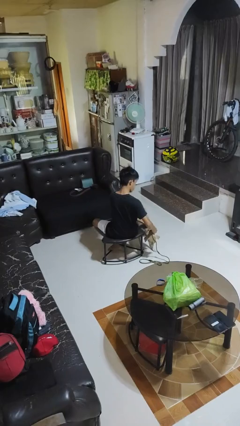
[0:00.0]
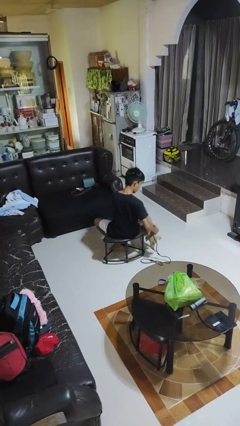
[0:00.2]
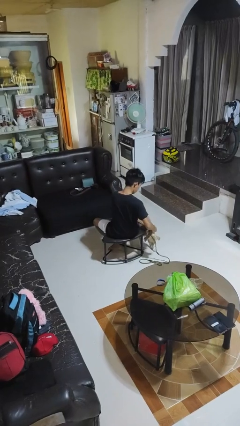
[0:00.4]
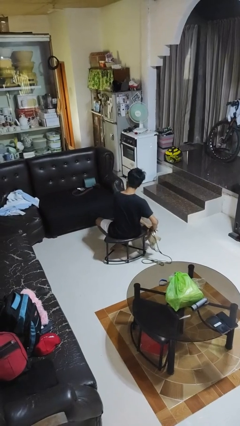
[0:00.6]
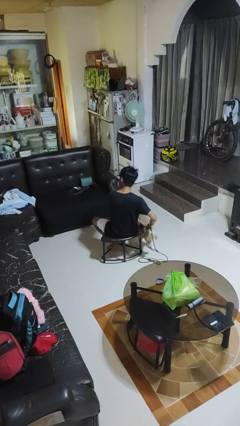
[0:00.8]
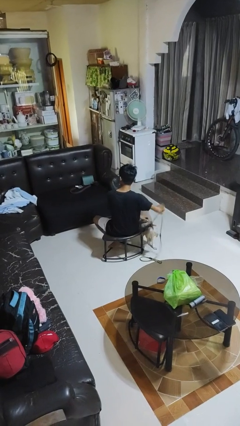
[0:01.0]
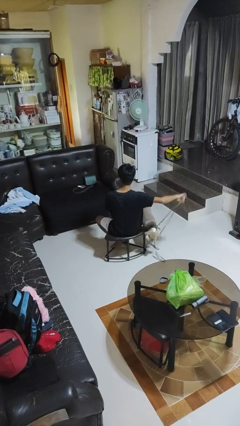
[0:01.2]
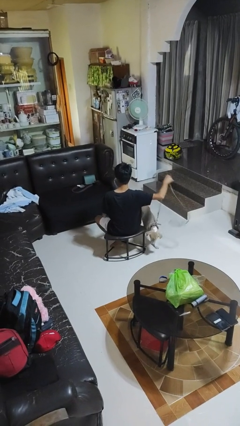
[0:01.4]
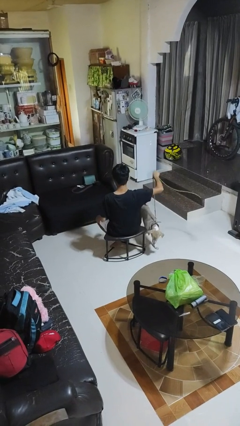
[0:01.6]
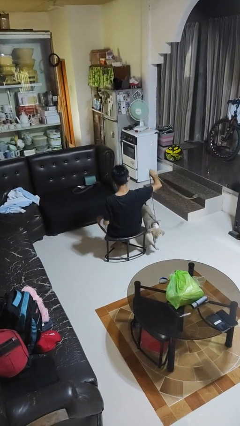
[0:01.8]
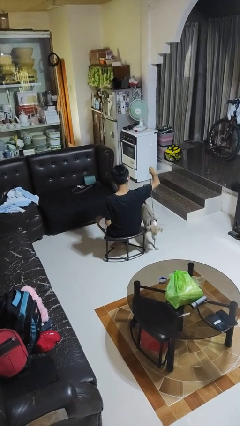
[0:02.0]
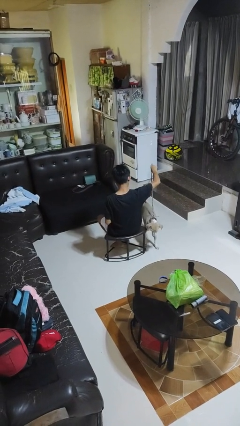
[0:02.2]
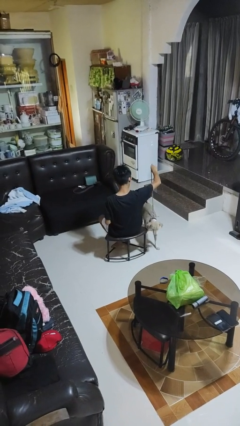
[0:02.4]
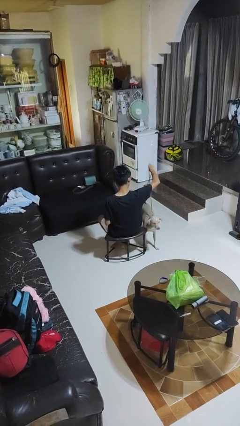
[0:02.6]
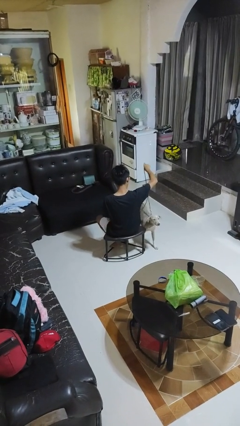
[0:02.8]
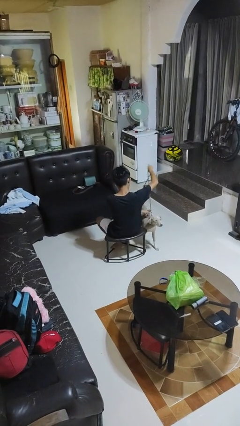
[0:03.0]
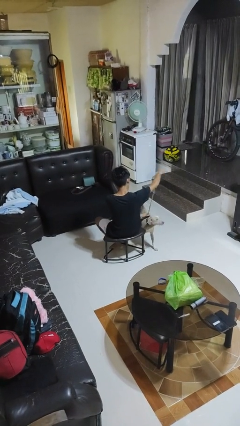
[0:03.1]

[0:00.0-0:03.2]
person attaches leash to dog

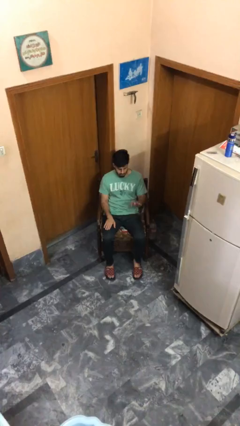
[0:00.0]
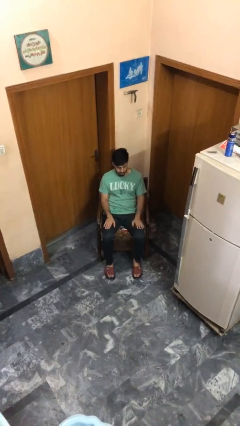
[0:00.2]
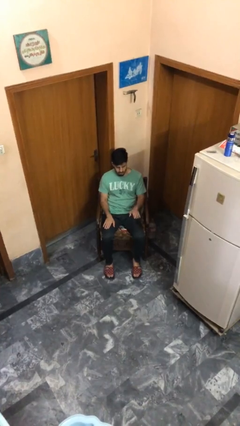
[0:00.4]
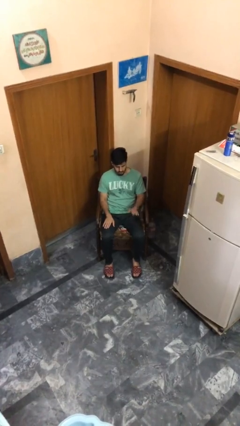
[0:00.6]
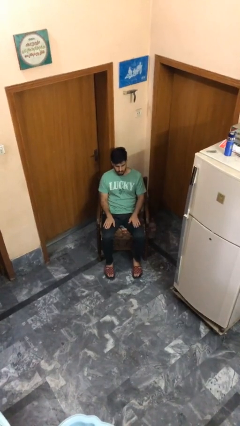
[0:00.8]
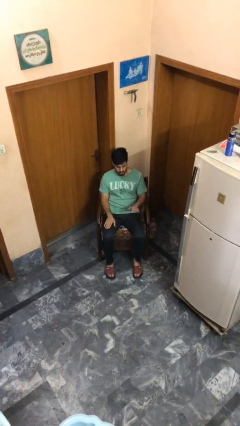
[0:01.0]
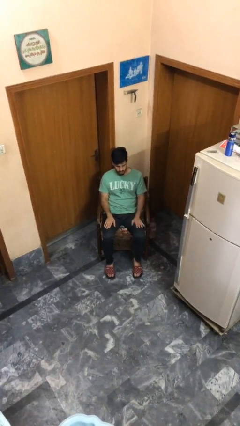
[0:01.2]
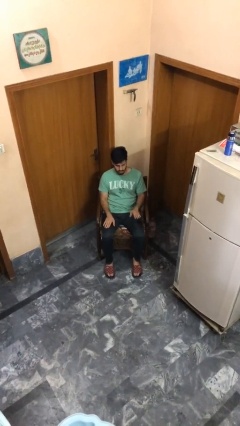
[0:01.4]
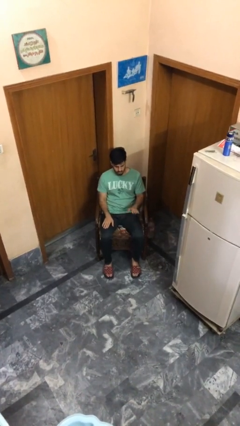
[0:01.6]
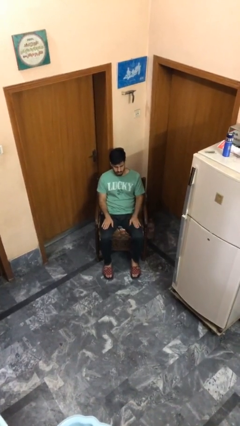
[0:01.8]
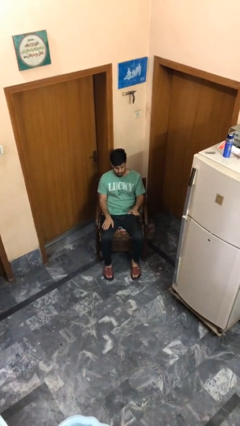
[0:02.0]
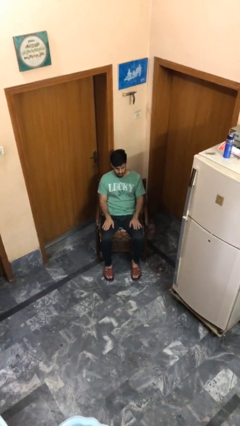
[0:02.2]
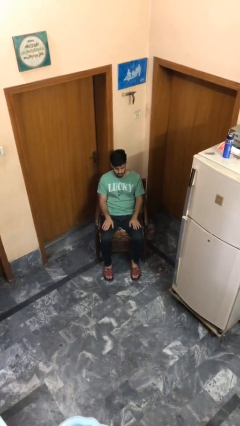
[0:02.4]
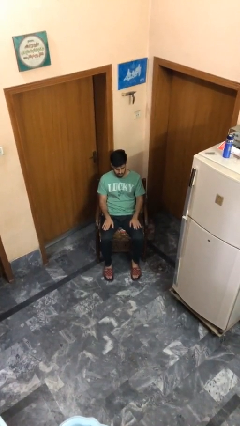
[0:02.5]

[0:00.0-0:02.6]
person slaps hands on thighs

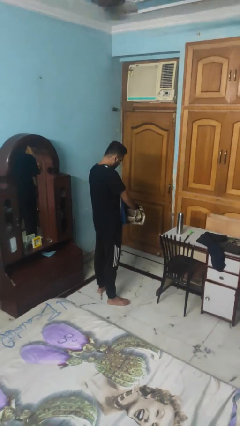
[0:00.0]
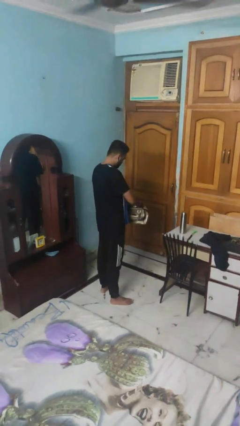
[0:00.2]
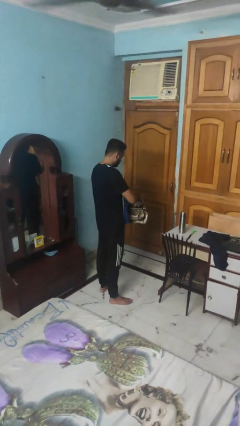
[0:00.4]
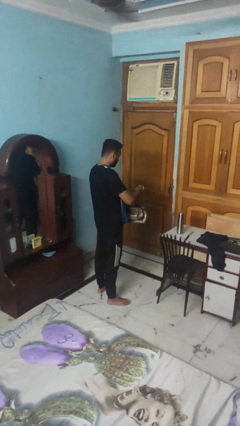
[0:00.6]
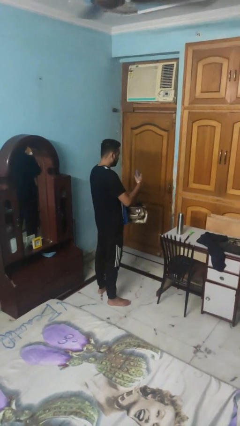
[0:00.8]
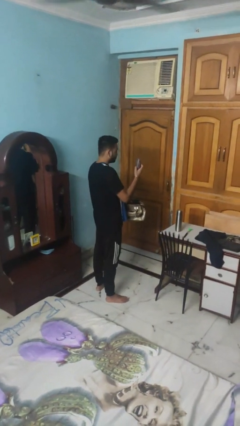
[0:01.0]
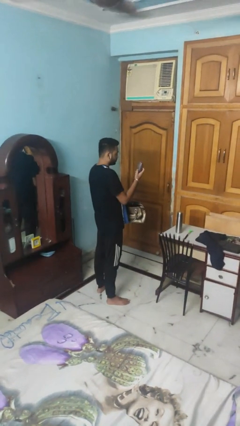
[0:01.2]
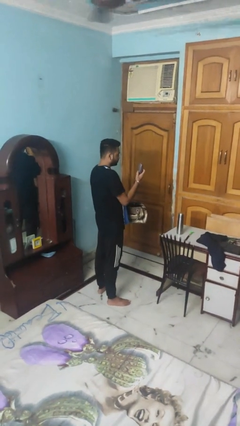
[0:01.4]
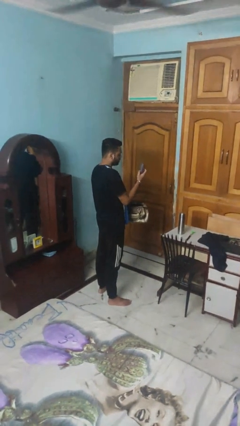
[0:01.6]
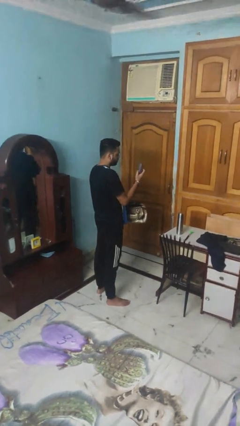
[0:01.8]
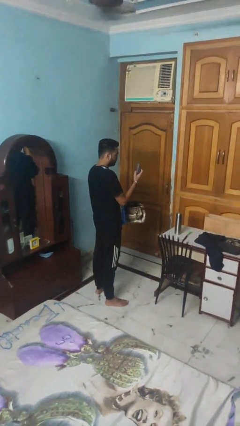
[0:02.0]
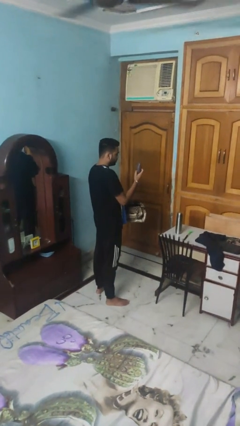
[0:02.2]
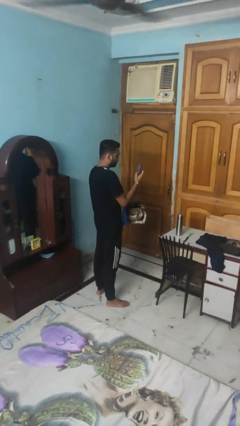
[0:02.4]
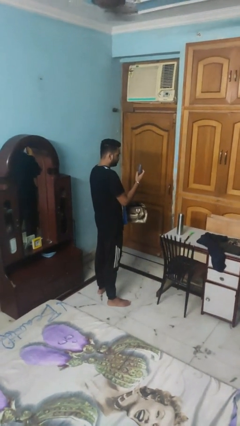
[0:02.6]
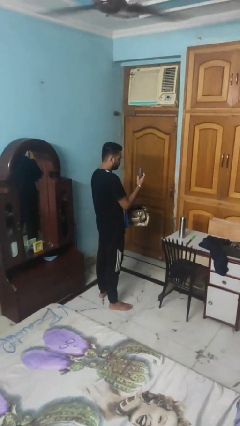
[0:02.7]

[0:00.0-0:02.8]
person takes object from purse

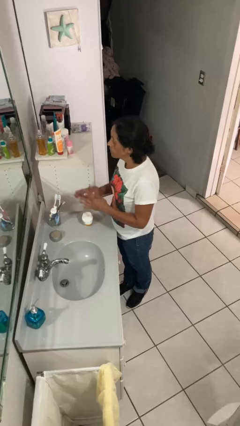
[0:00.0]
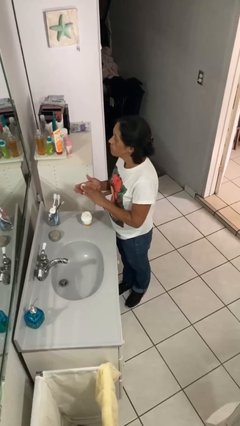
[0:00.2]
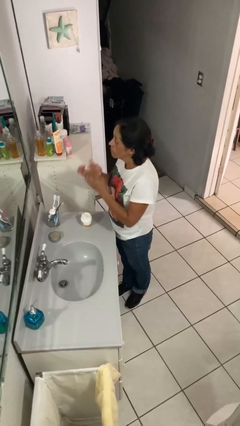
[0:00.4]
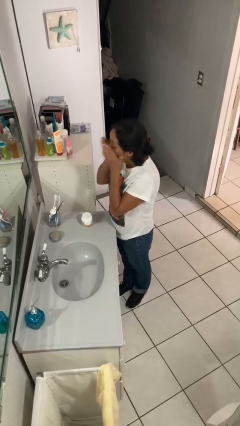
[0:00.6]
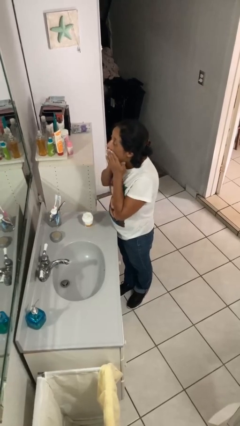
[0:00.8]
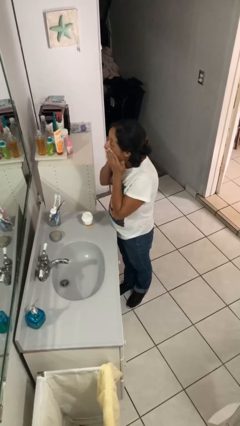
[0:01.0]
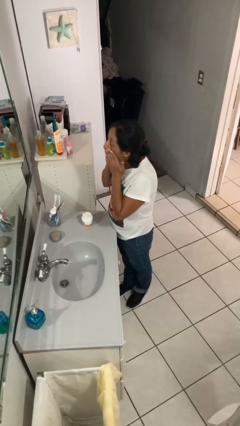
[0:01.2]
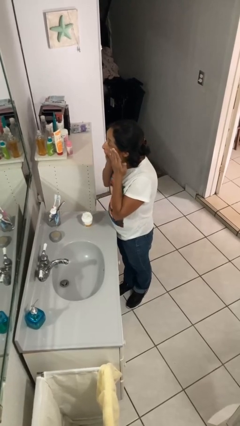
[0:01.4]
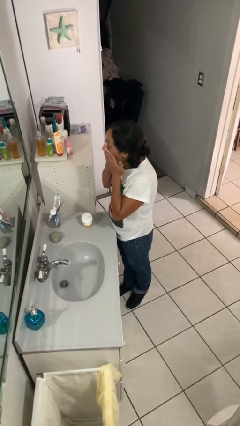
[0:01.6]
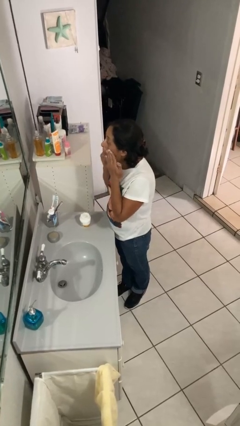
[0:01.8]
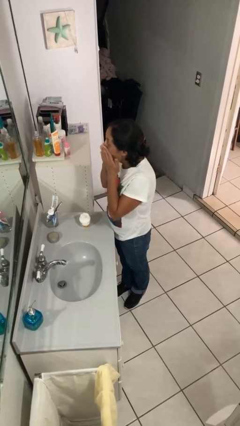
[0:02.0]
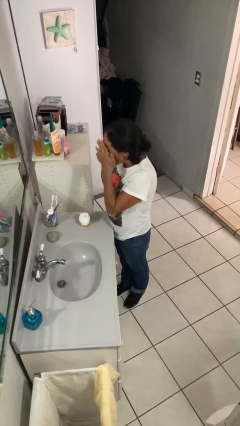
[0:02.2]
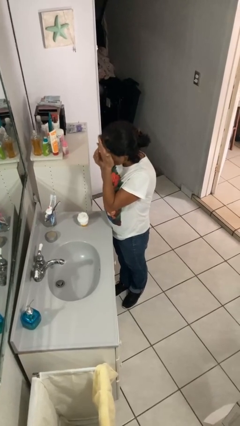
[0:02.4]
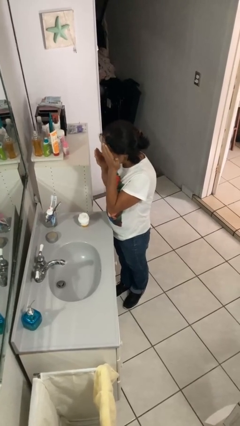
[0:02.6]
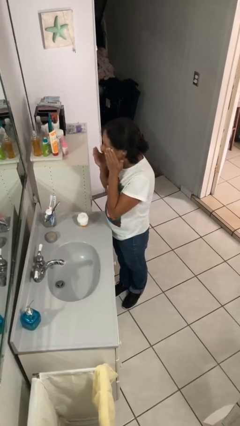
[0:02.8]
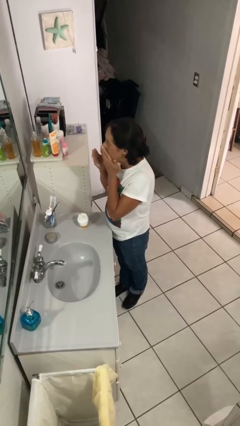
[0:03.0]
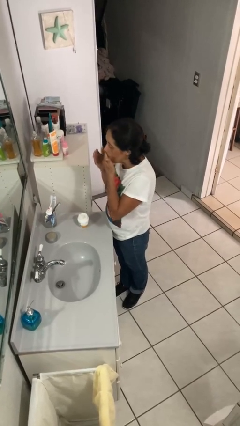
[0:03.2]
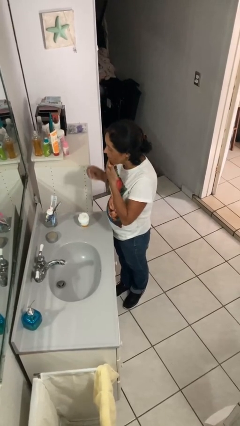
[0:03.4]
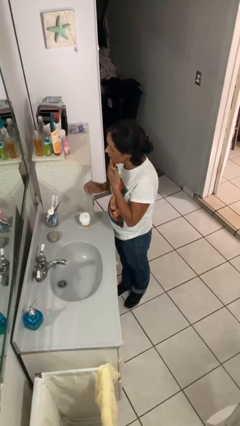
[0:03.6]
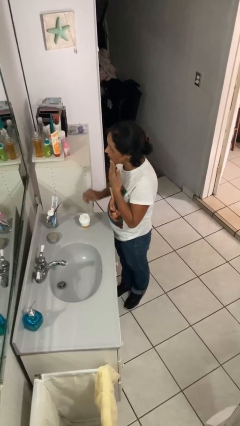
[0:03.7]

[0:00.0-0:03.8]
person applies facial moisturizer

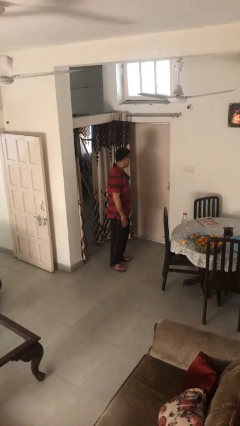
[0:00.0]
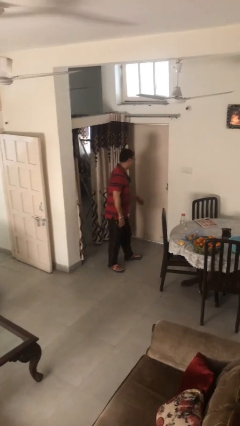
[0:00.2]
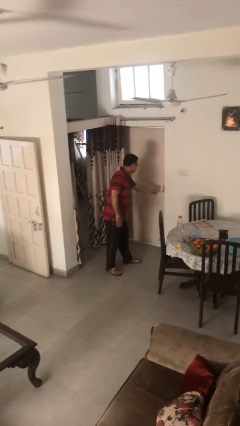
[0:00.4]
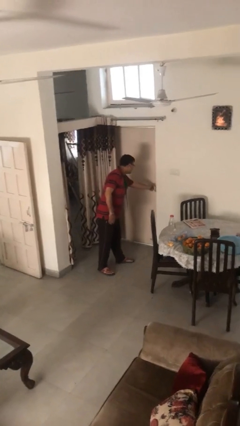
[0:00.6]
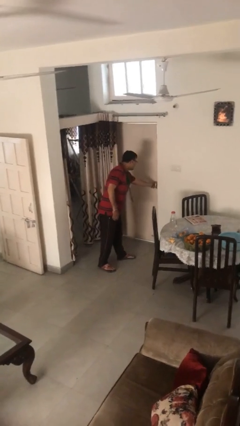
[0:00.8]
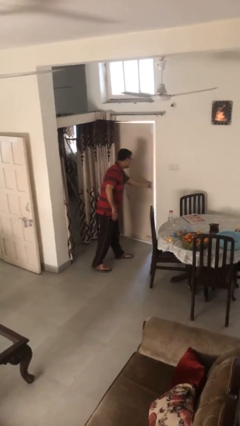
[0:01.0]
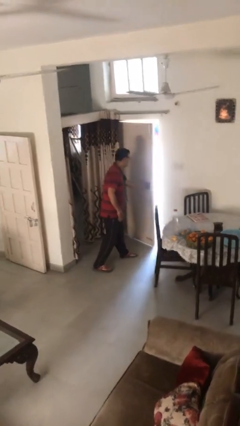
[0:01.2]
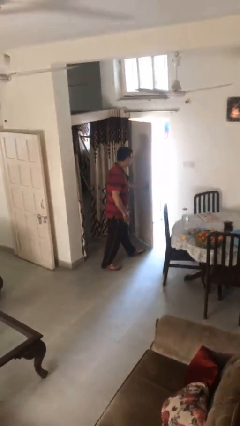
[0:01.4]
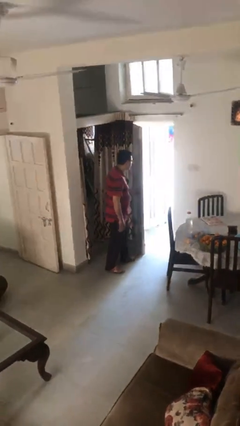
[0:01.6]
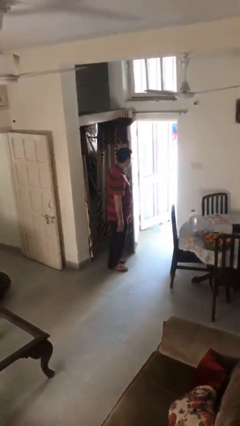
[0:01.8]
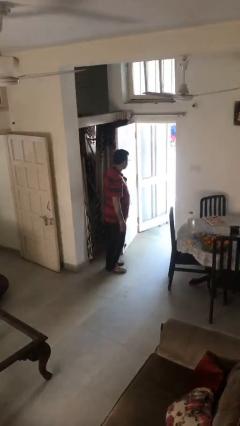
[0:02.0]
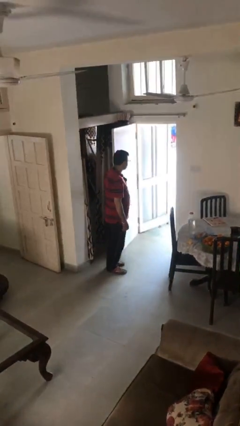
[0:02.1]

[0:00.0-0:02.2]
person opens facility door

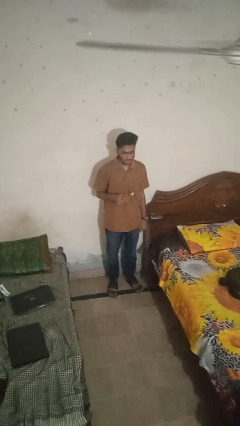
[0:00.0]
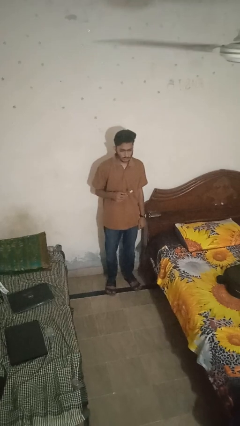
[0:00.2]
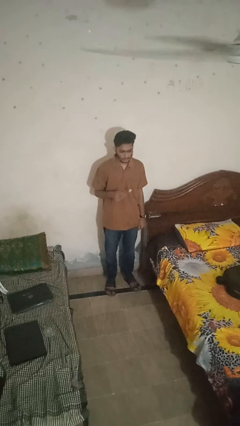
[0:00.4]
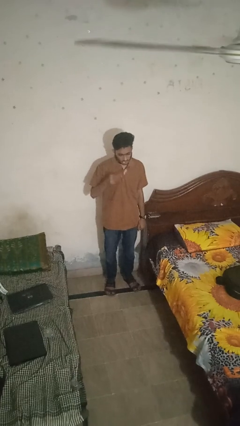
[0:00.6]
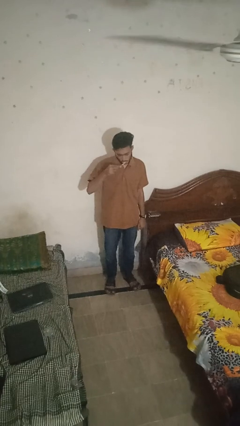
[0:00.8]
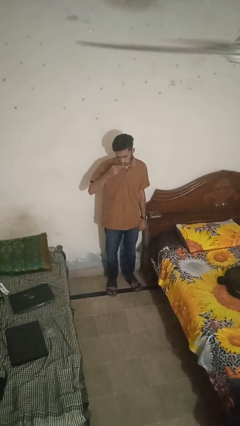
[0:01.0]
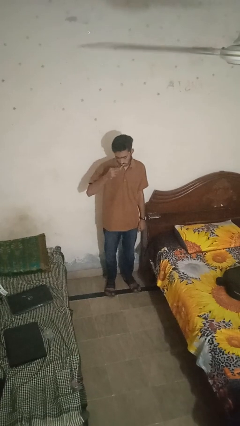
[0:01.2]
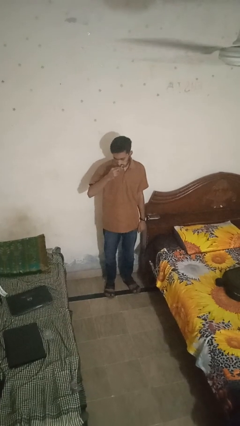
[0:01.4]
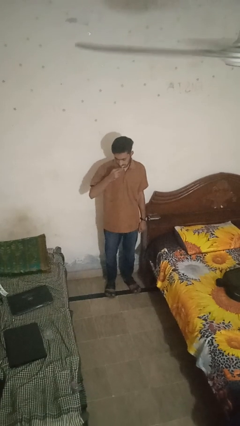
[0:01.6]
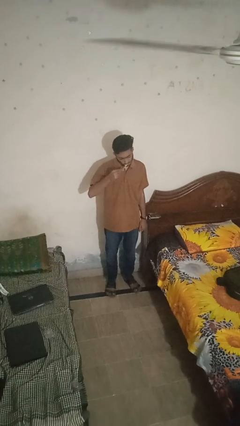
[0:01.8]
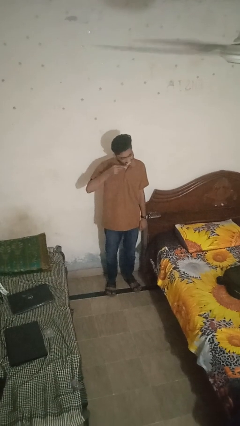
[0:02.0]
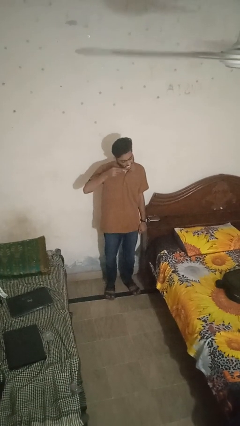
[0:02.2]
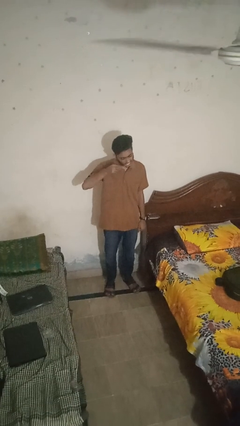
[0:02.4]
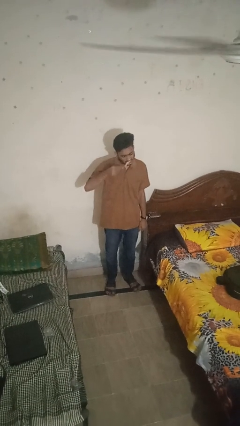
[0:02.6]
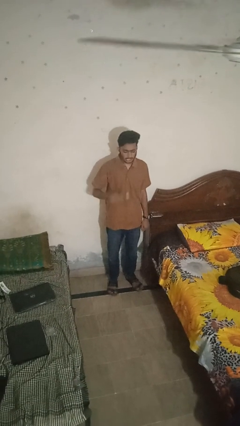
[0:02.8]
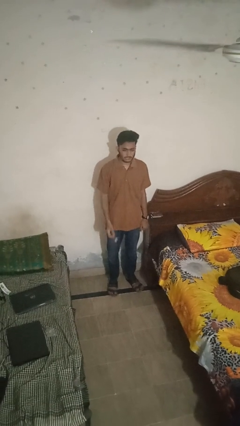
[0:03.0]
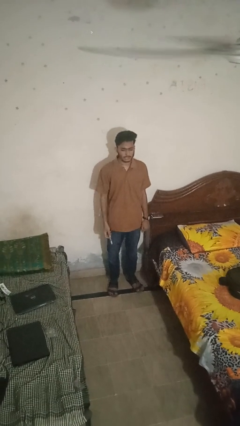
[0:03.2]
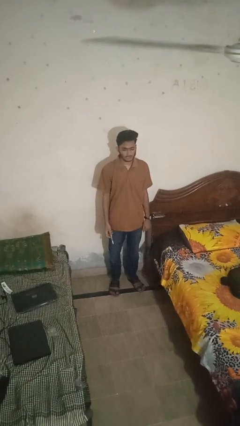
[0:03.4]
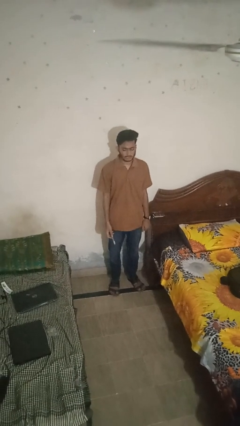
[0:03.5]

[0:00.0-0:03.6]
person brushes teeth
